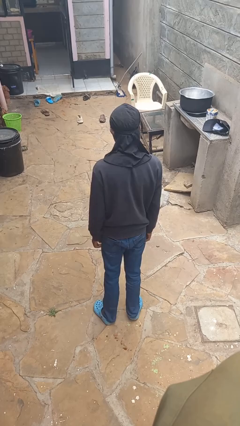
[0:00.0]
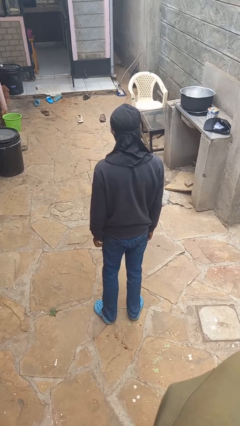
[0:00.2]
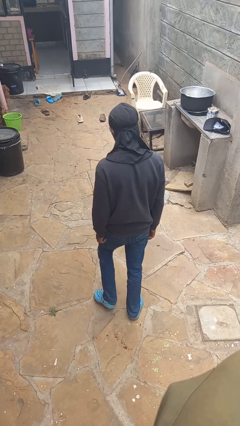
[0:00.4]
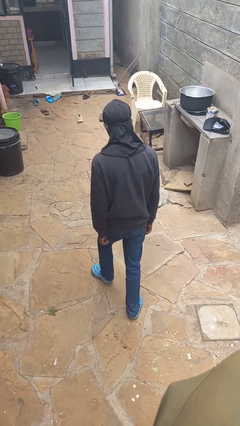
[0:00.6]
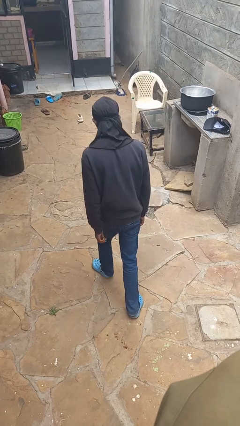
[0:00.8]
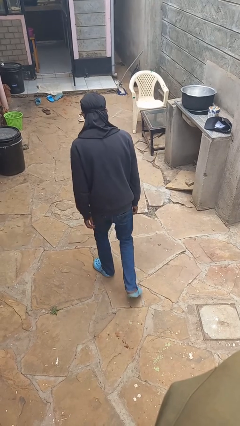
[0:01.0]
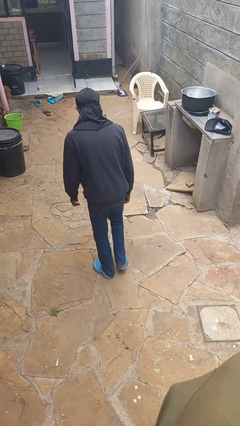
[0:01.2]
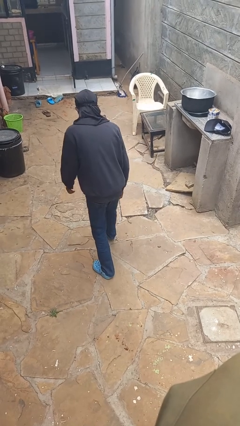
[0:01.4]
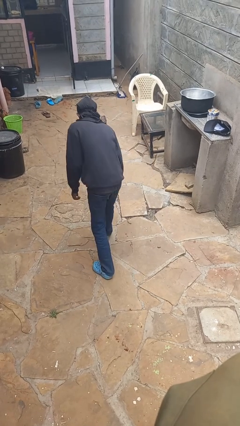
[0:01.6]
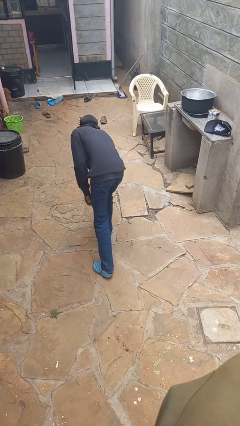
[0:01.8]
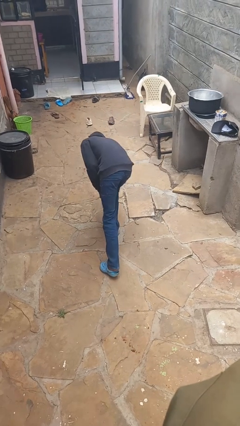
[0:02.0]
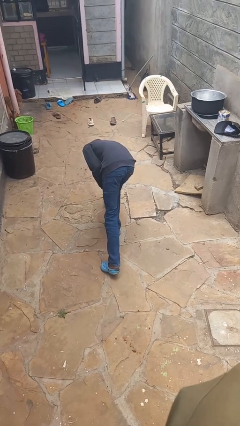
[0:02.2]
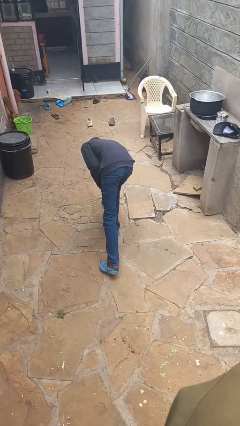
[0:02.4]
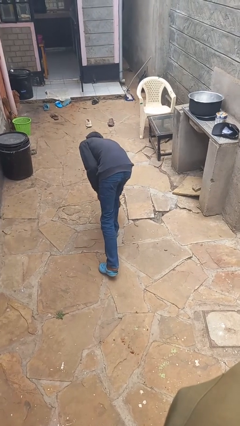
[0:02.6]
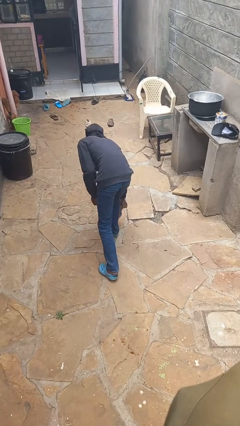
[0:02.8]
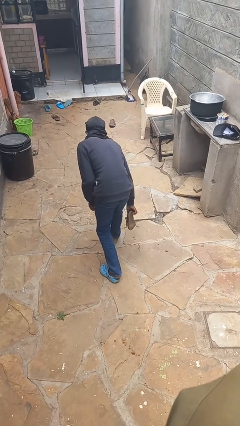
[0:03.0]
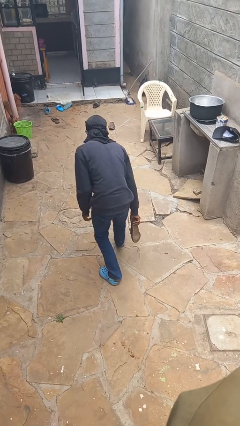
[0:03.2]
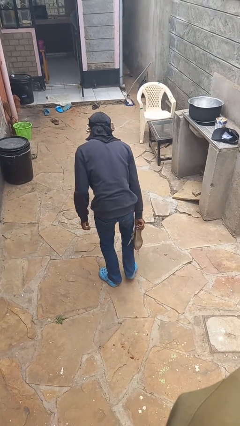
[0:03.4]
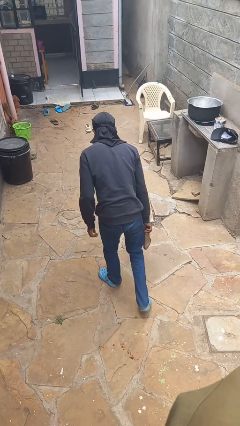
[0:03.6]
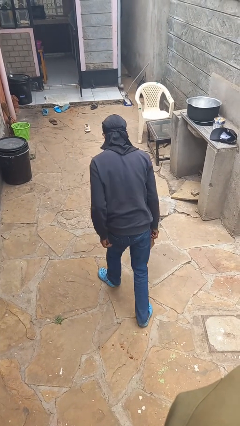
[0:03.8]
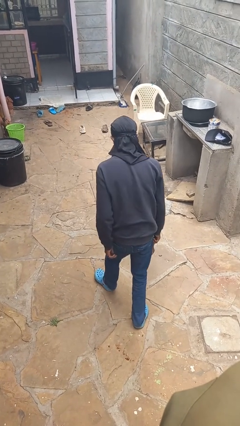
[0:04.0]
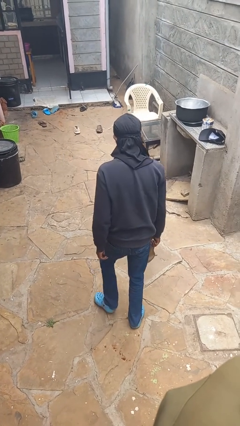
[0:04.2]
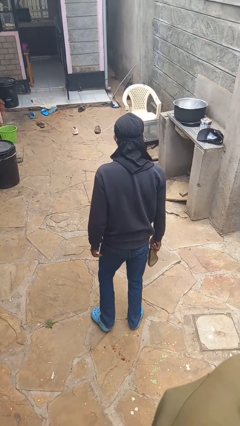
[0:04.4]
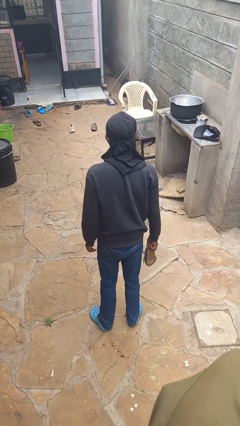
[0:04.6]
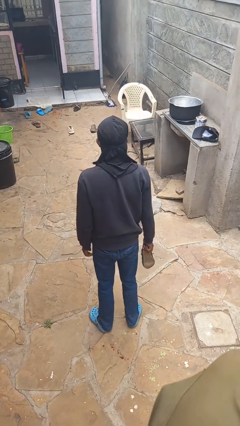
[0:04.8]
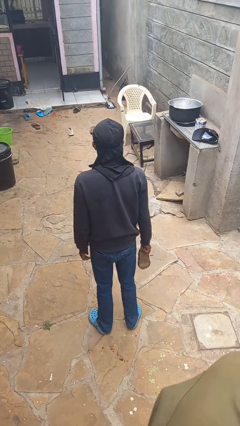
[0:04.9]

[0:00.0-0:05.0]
person picks up object from floor

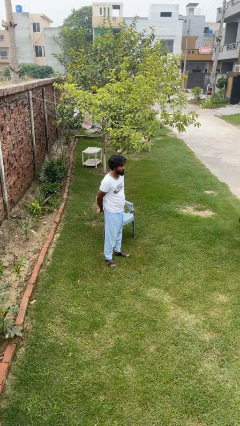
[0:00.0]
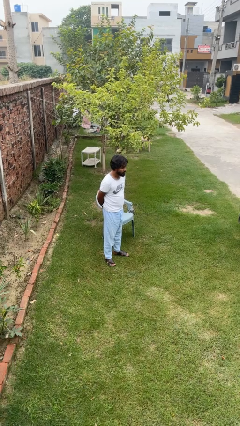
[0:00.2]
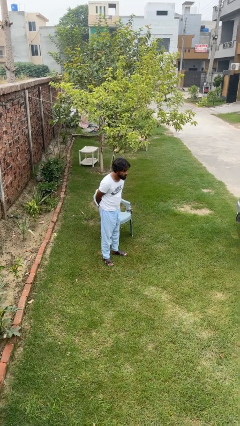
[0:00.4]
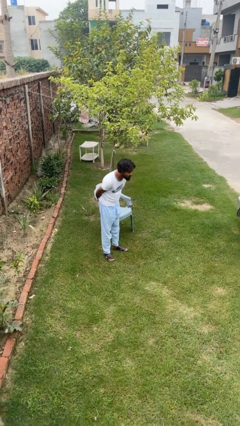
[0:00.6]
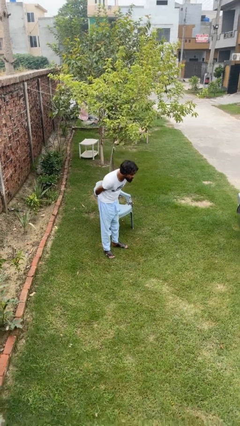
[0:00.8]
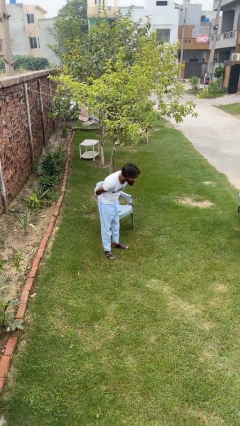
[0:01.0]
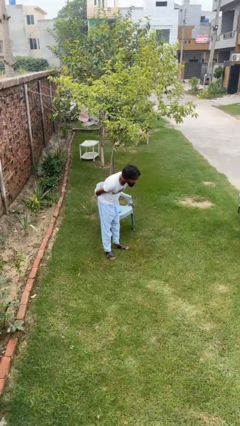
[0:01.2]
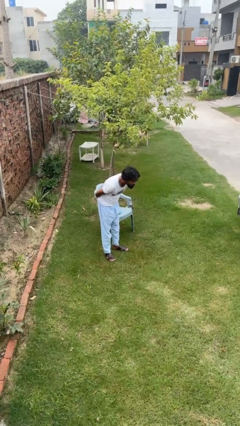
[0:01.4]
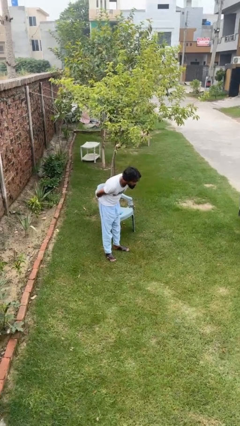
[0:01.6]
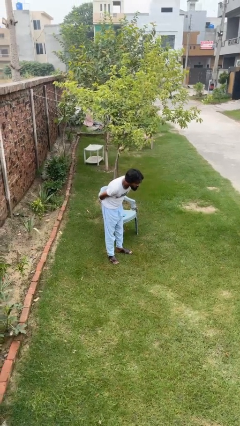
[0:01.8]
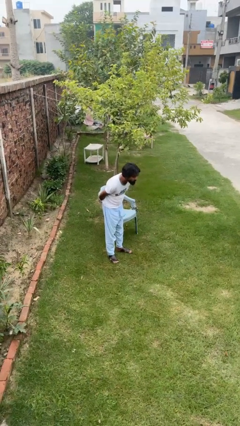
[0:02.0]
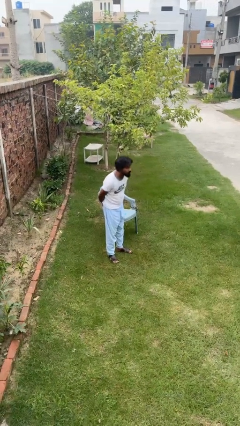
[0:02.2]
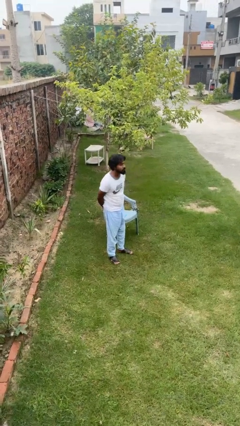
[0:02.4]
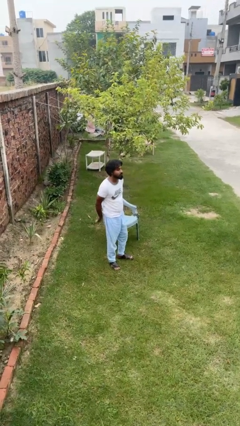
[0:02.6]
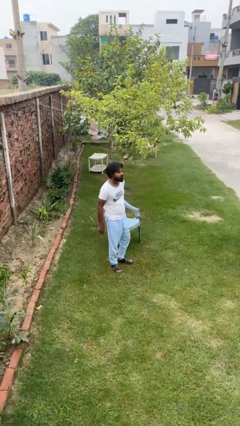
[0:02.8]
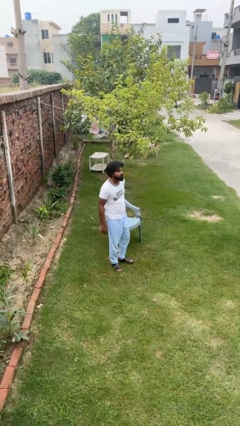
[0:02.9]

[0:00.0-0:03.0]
person bows

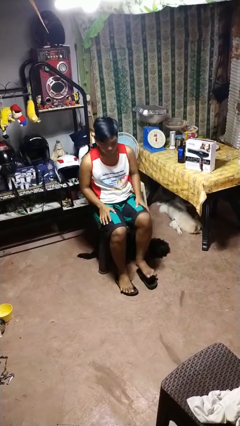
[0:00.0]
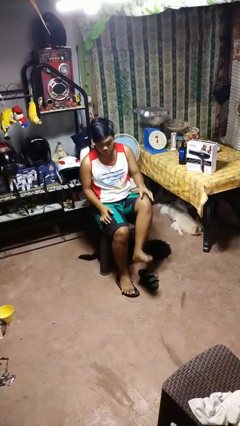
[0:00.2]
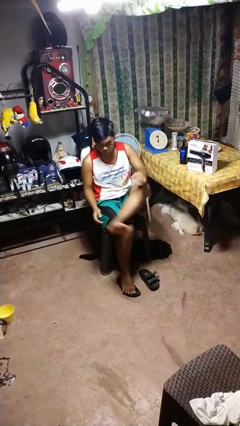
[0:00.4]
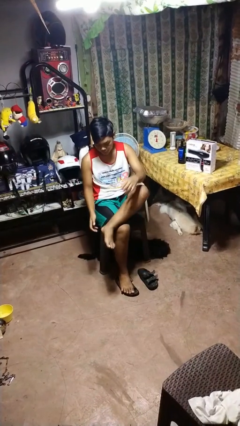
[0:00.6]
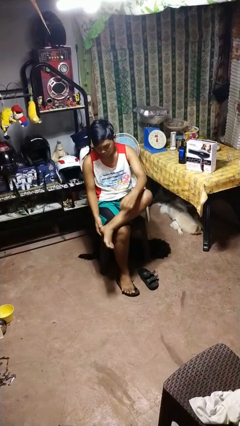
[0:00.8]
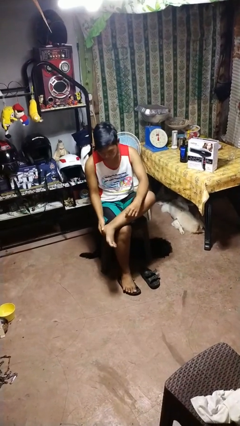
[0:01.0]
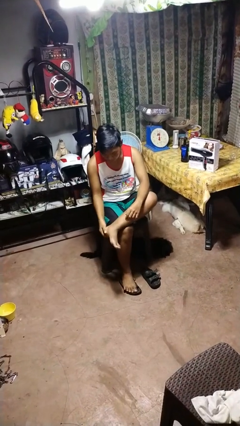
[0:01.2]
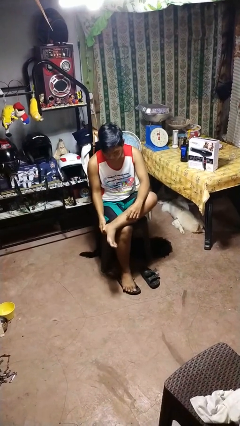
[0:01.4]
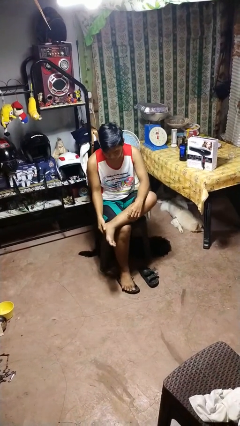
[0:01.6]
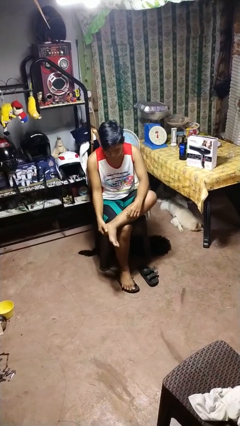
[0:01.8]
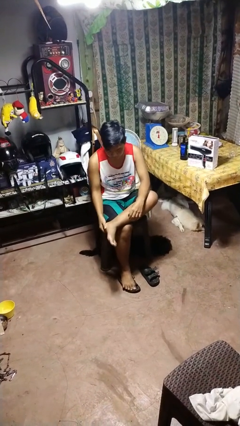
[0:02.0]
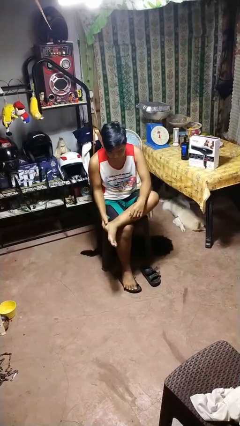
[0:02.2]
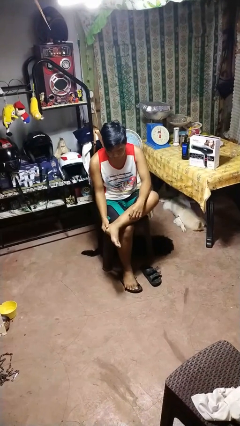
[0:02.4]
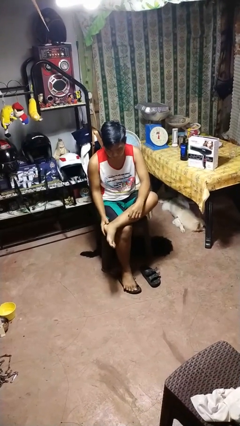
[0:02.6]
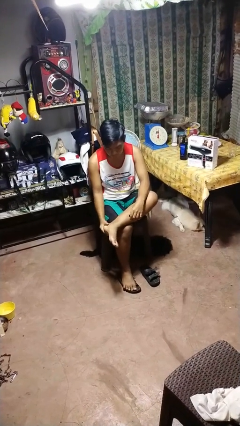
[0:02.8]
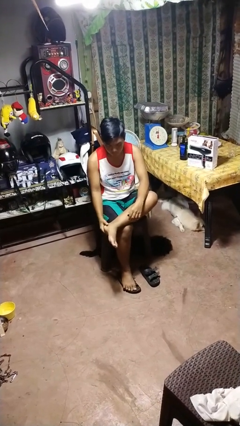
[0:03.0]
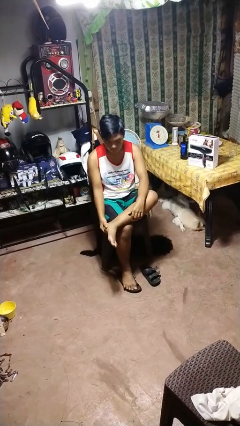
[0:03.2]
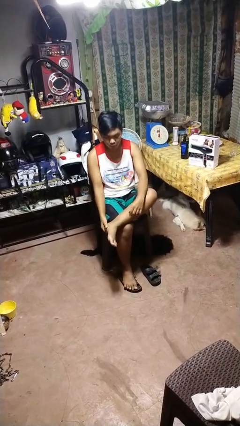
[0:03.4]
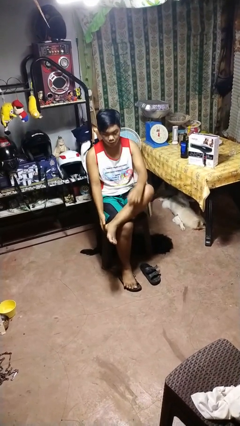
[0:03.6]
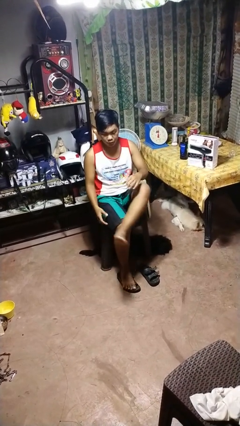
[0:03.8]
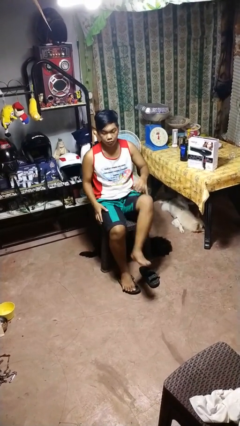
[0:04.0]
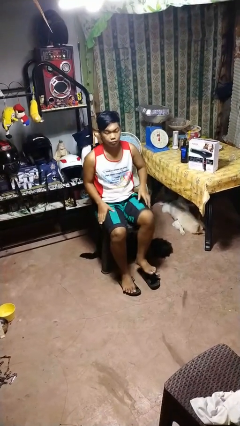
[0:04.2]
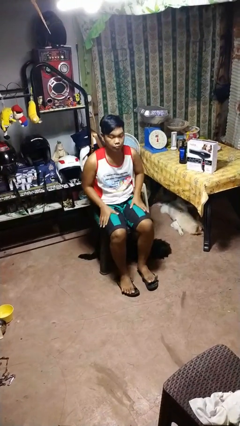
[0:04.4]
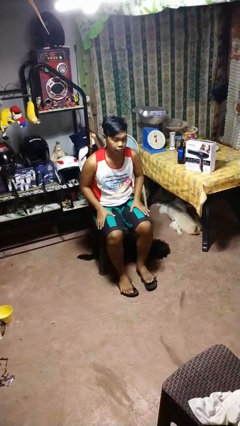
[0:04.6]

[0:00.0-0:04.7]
person rubs foot

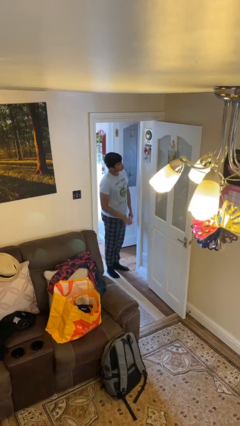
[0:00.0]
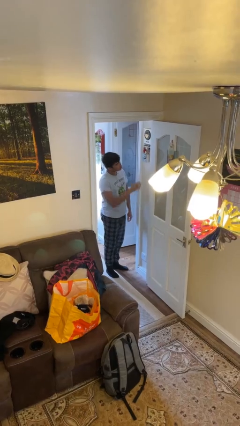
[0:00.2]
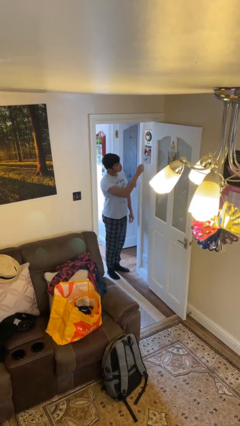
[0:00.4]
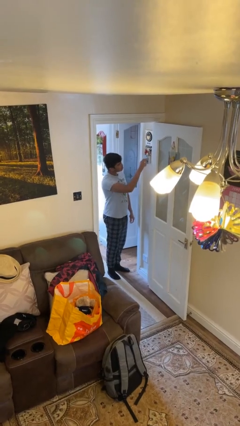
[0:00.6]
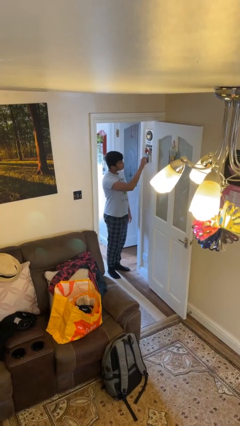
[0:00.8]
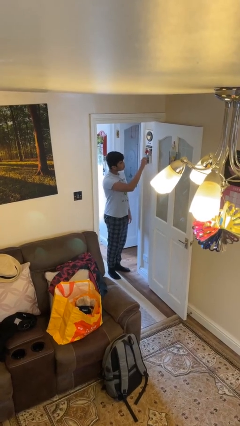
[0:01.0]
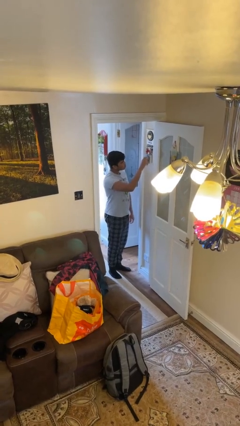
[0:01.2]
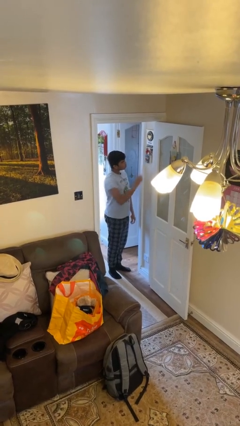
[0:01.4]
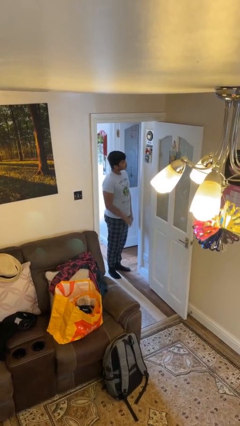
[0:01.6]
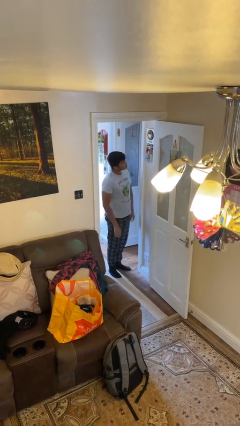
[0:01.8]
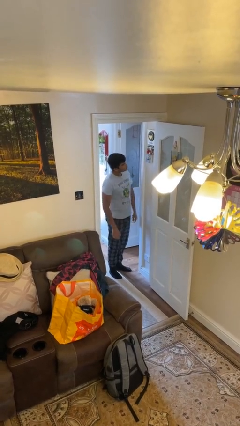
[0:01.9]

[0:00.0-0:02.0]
person adjusts thermostat

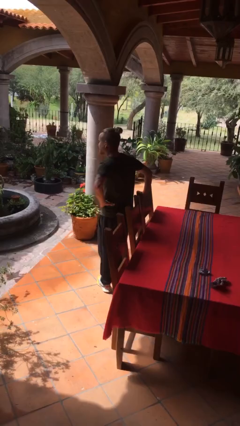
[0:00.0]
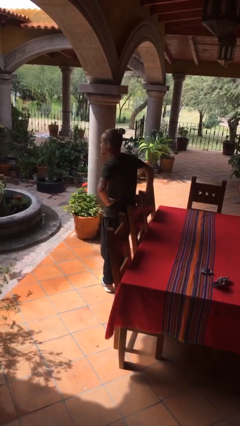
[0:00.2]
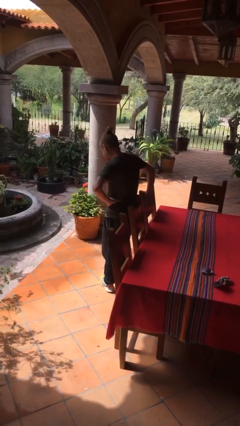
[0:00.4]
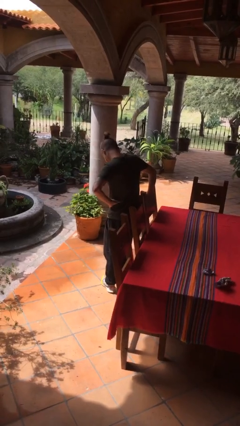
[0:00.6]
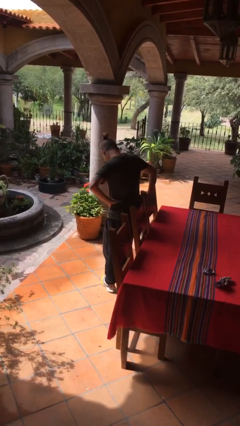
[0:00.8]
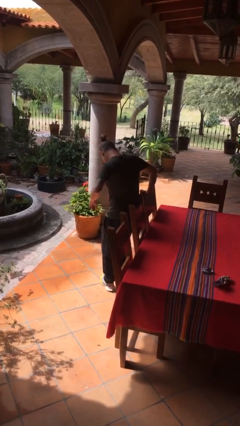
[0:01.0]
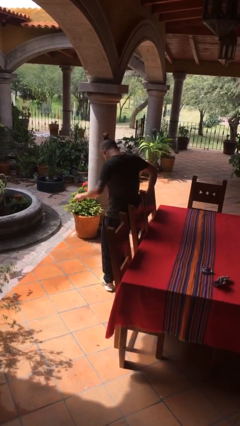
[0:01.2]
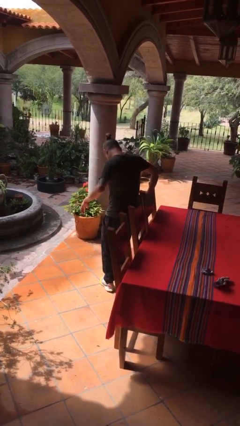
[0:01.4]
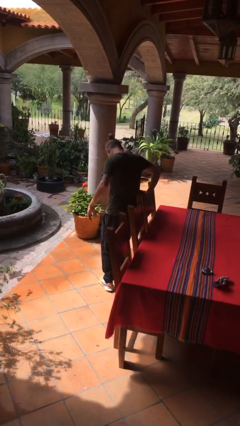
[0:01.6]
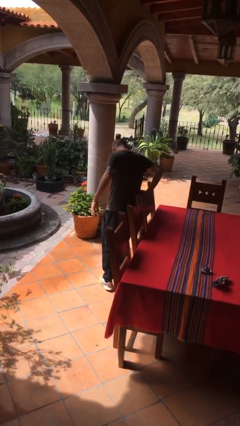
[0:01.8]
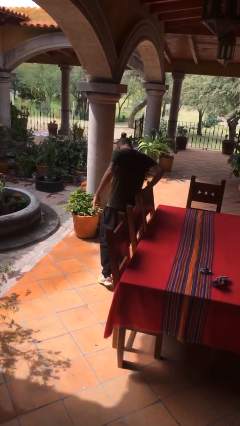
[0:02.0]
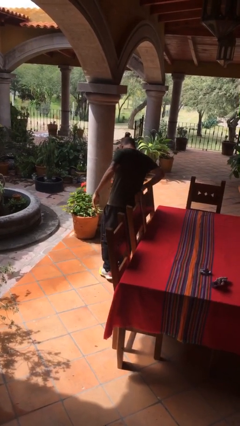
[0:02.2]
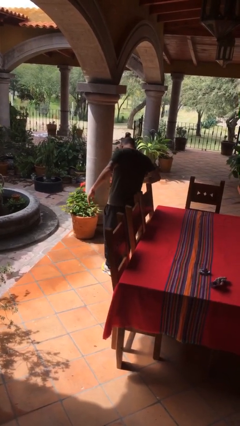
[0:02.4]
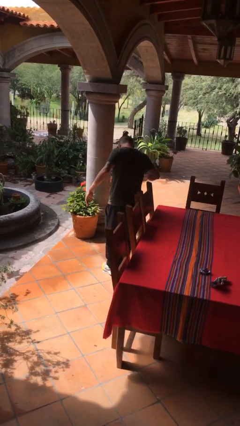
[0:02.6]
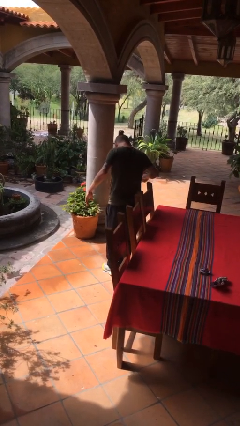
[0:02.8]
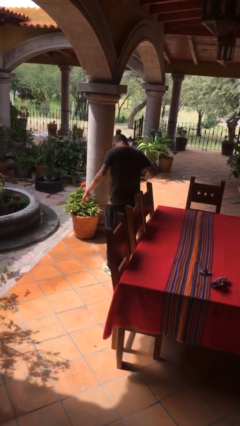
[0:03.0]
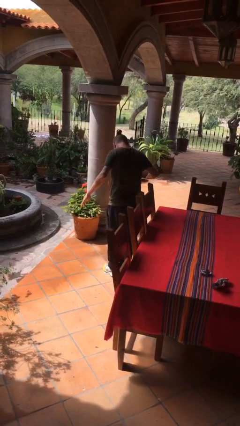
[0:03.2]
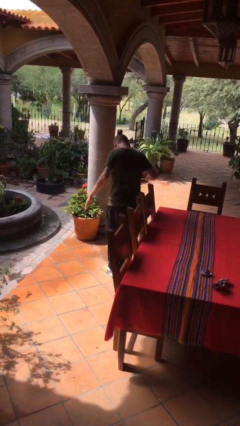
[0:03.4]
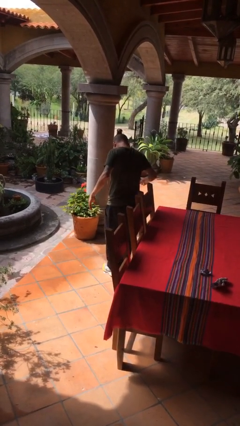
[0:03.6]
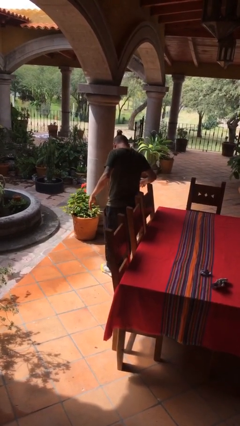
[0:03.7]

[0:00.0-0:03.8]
person uses bodyweight scale
